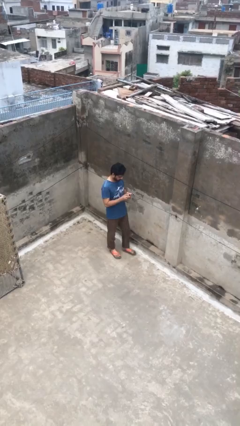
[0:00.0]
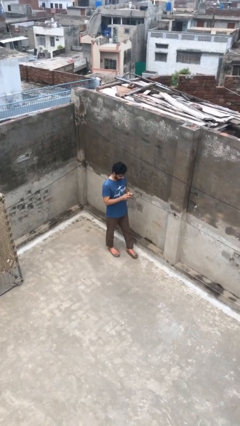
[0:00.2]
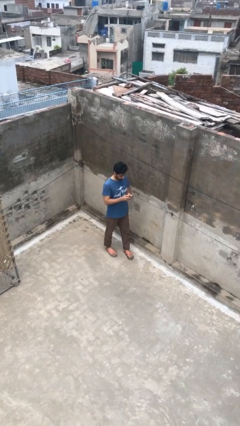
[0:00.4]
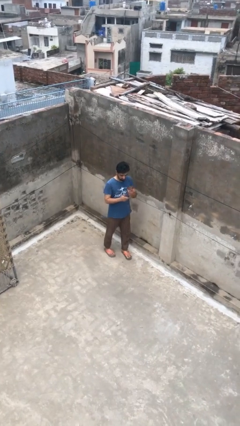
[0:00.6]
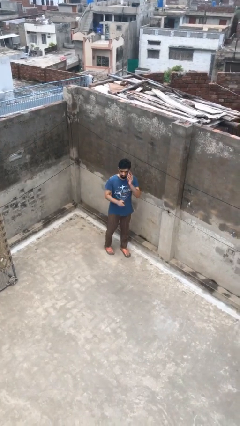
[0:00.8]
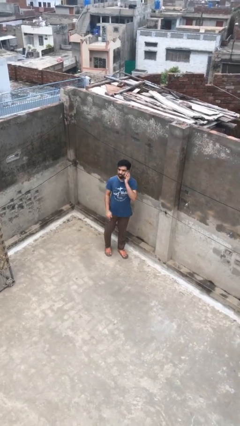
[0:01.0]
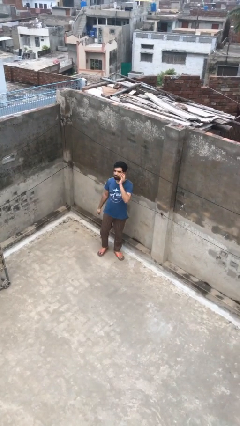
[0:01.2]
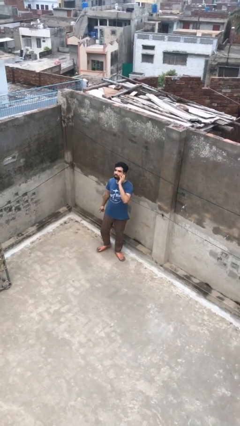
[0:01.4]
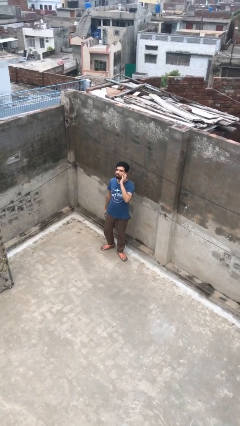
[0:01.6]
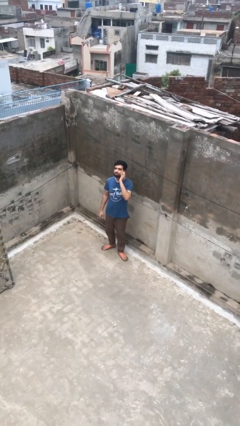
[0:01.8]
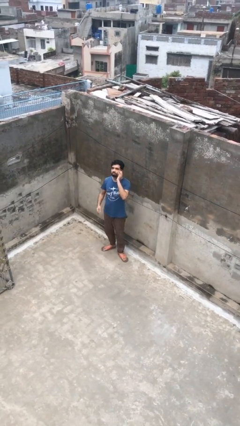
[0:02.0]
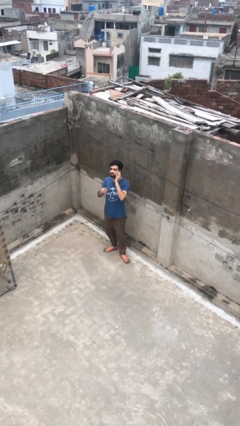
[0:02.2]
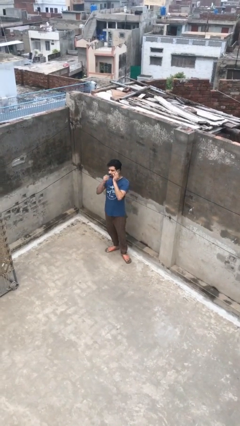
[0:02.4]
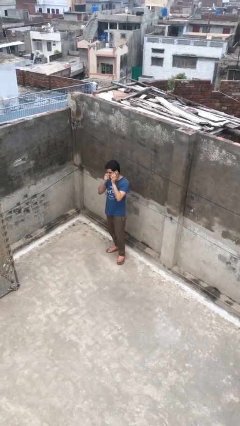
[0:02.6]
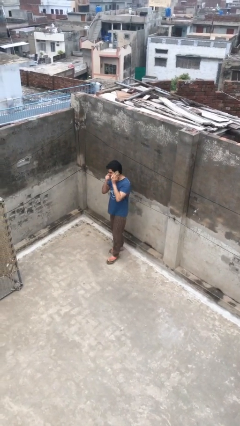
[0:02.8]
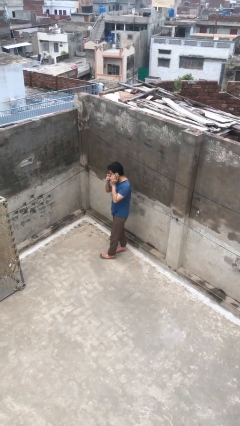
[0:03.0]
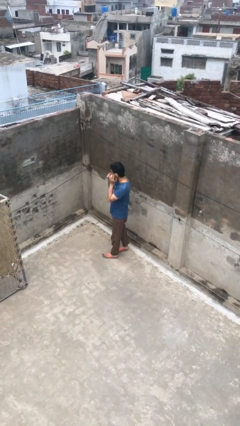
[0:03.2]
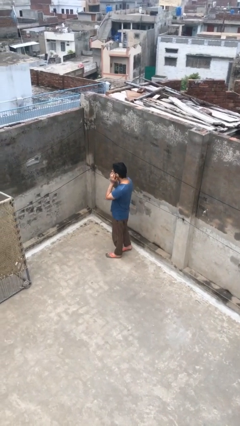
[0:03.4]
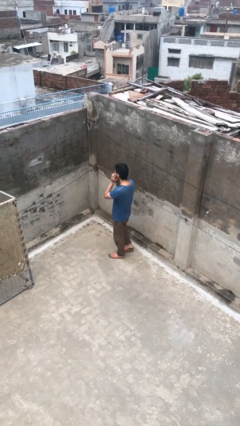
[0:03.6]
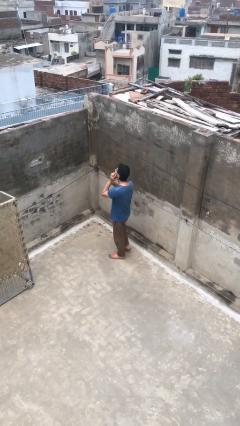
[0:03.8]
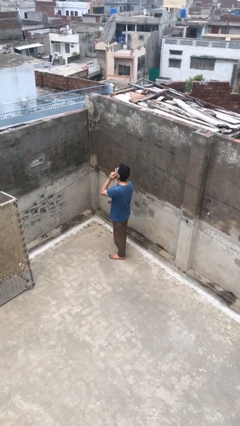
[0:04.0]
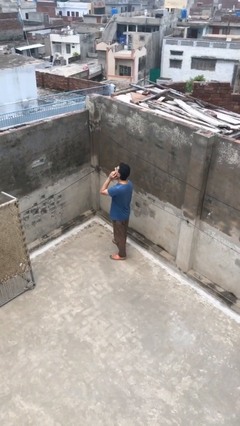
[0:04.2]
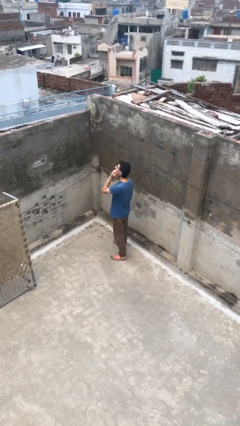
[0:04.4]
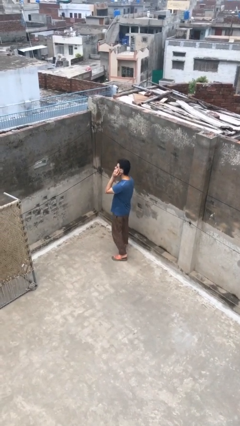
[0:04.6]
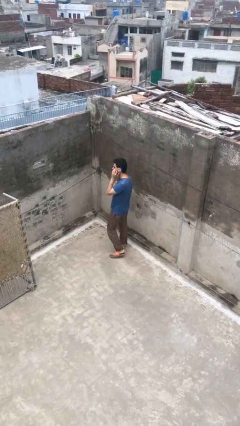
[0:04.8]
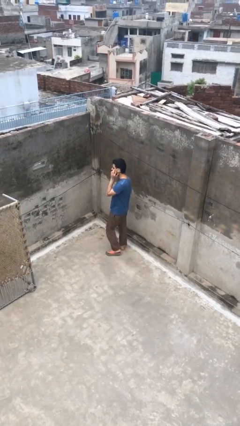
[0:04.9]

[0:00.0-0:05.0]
person talks on phone

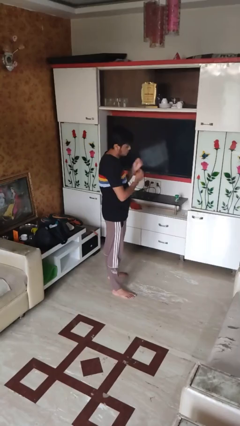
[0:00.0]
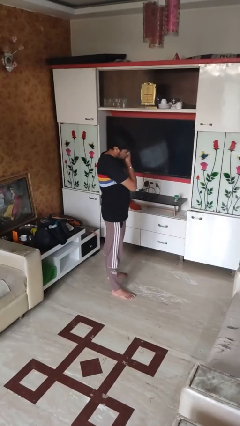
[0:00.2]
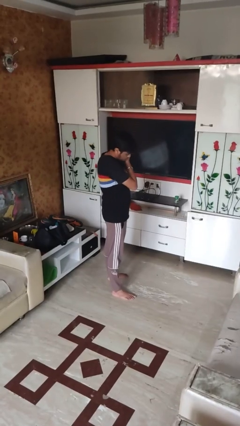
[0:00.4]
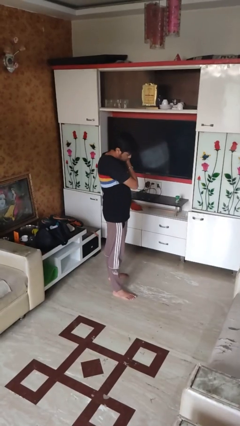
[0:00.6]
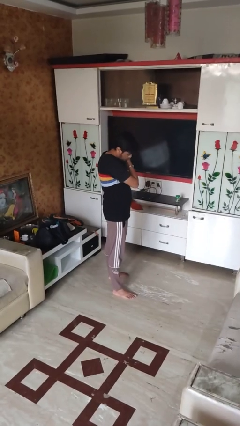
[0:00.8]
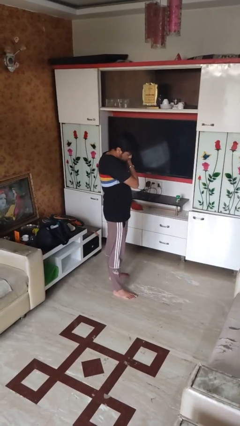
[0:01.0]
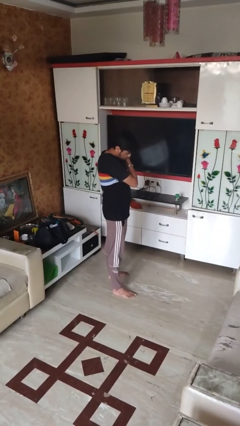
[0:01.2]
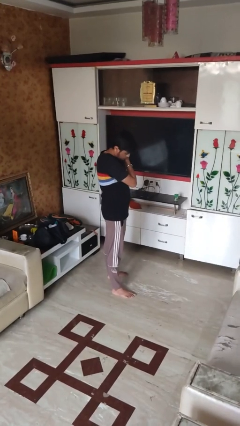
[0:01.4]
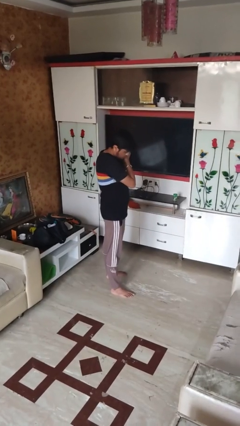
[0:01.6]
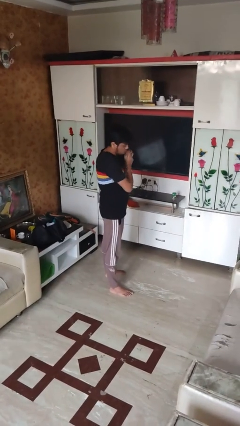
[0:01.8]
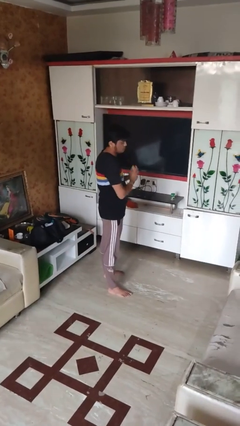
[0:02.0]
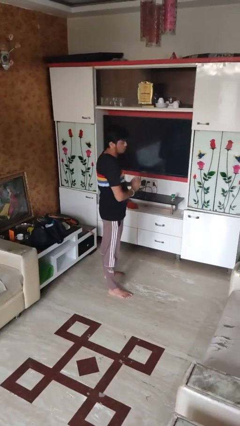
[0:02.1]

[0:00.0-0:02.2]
person takes off earrings

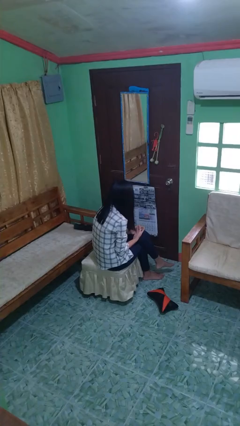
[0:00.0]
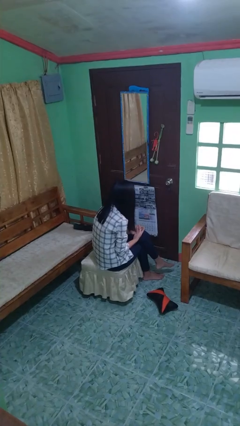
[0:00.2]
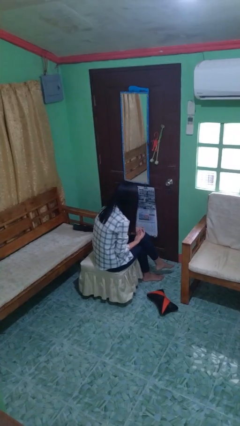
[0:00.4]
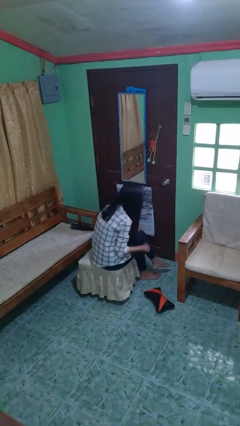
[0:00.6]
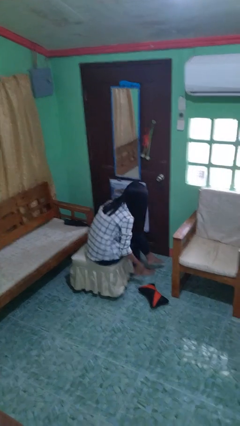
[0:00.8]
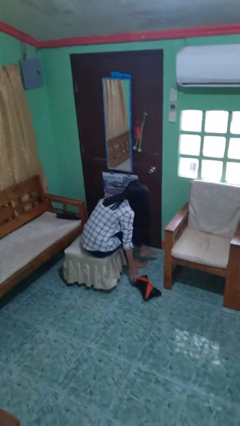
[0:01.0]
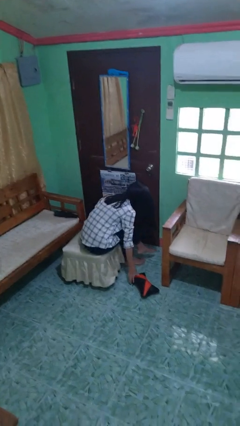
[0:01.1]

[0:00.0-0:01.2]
person picks up object from floor

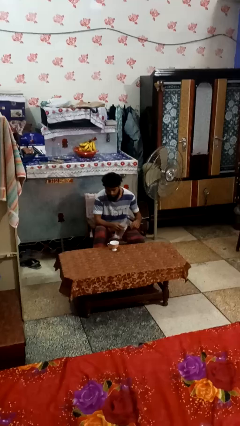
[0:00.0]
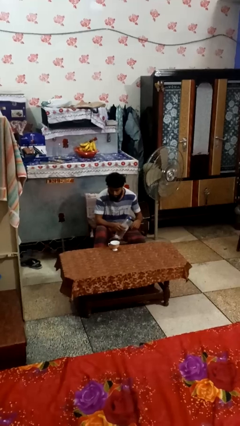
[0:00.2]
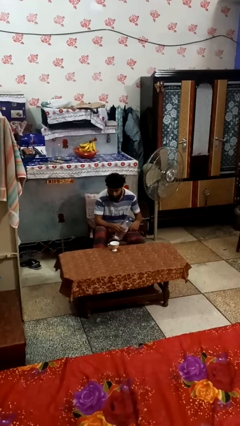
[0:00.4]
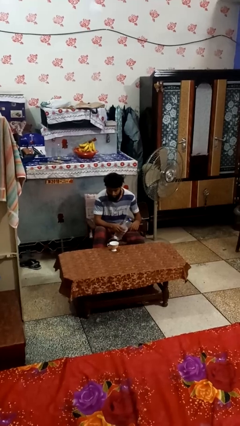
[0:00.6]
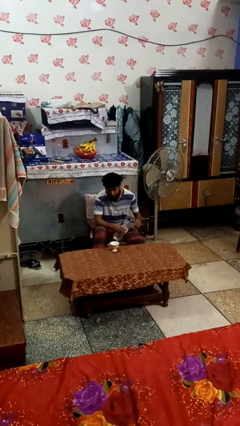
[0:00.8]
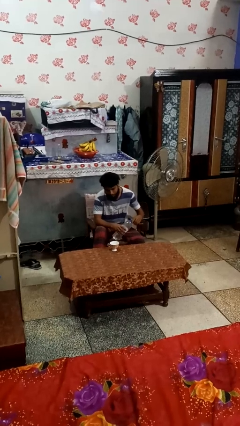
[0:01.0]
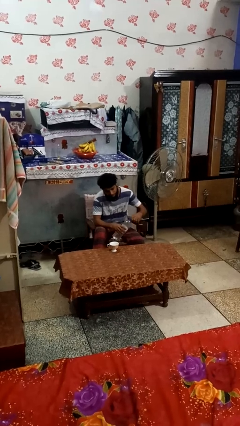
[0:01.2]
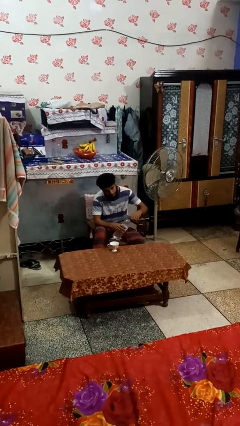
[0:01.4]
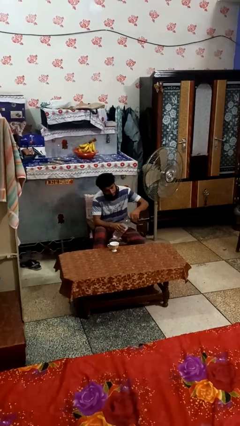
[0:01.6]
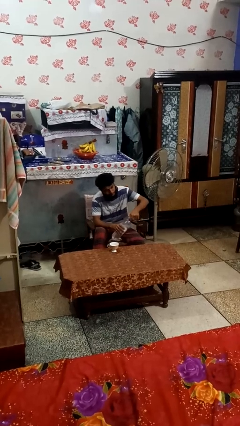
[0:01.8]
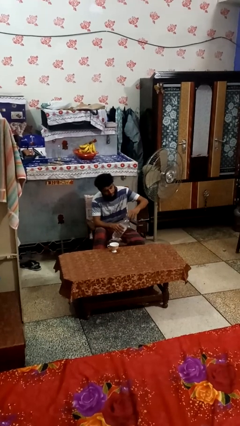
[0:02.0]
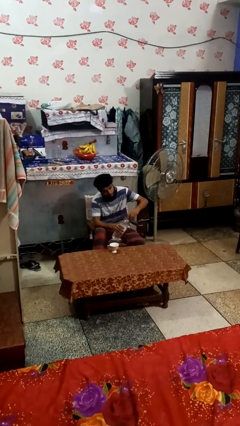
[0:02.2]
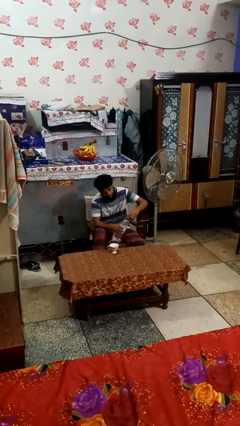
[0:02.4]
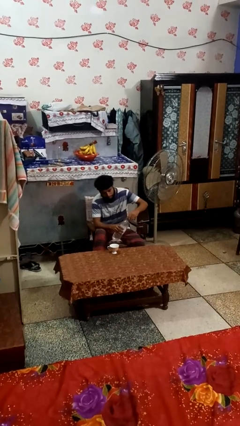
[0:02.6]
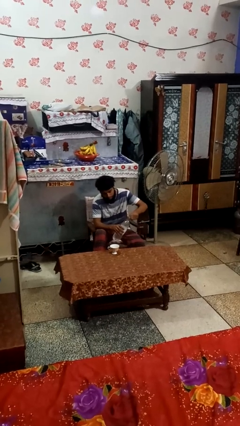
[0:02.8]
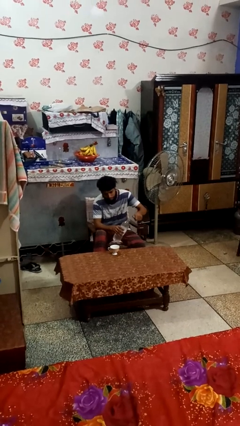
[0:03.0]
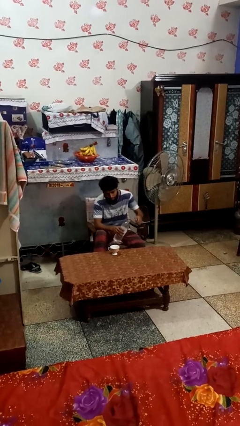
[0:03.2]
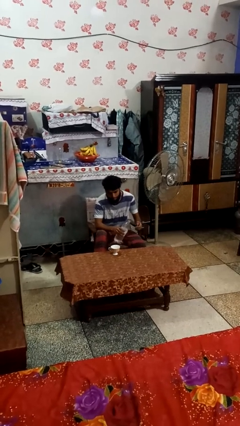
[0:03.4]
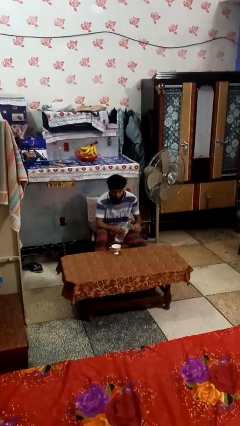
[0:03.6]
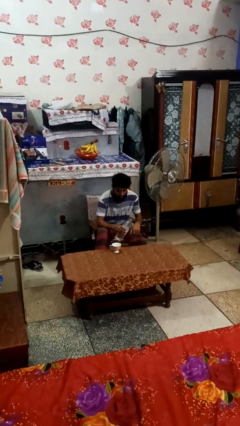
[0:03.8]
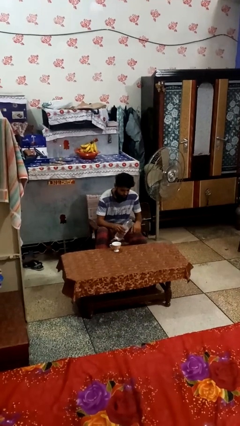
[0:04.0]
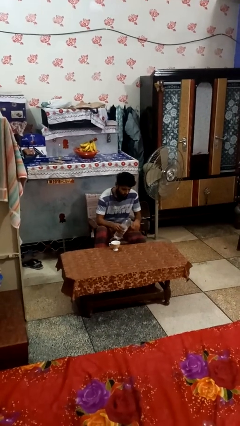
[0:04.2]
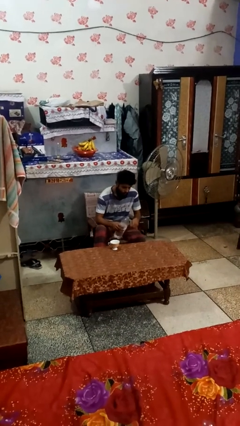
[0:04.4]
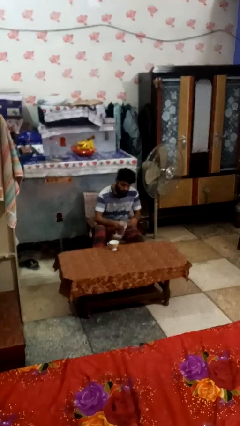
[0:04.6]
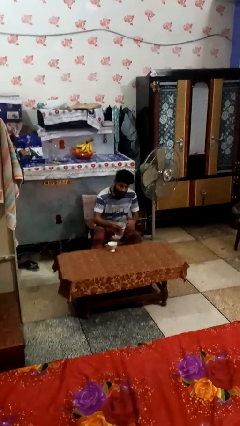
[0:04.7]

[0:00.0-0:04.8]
person unscrews lid from bottle

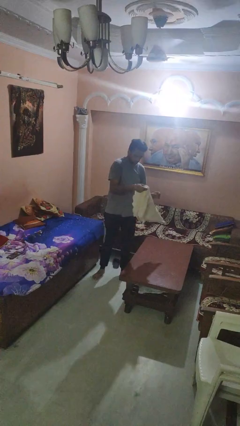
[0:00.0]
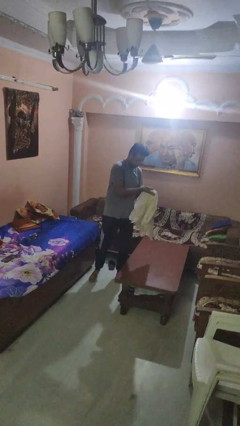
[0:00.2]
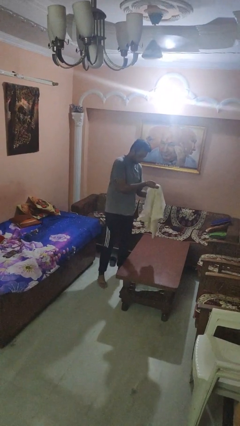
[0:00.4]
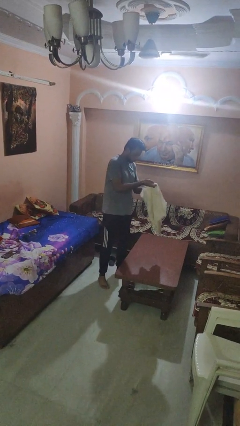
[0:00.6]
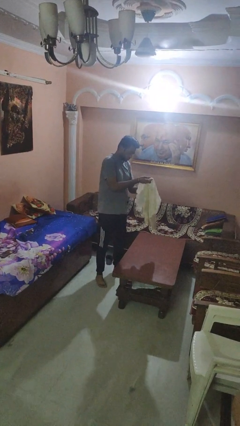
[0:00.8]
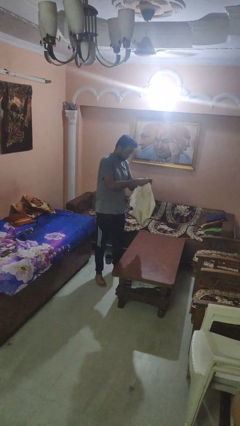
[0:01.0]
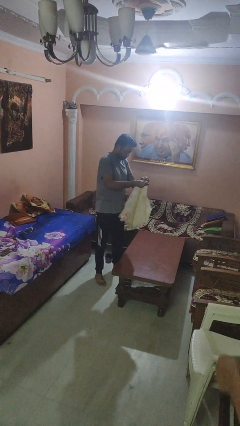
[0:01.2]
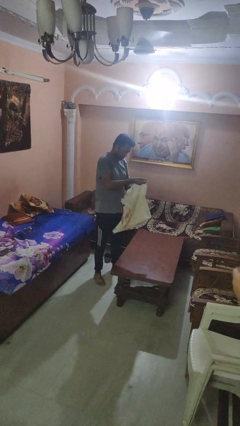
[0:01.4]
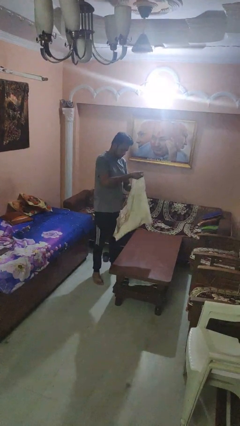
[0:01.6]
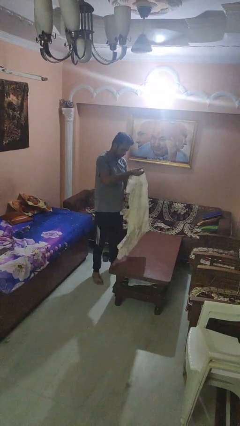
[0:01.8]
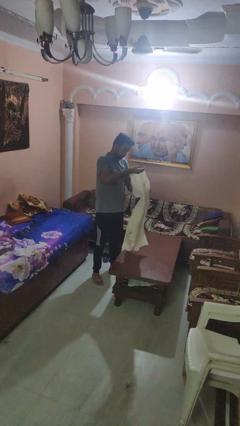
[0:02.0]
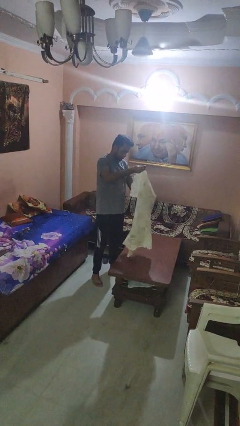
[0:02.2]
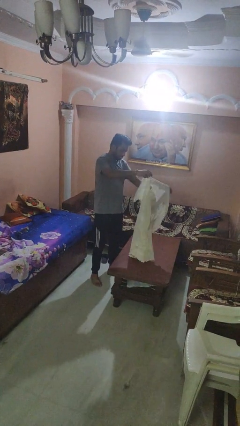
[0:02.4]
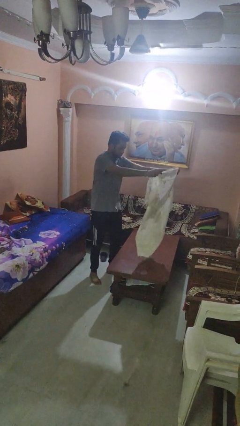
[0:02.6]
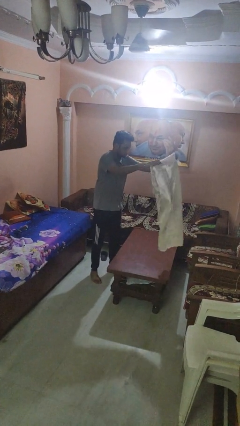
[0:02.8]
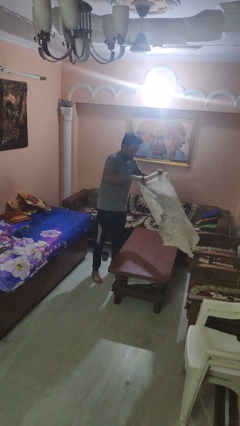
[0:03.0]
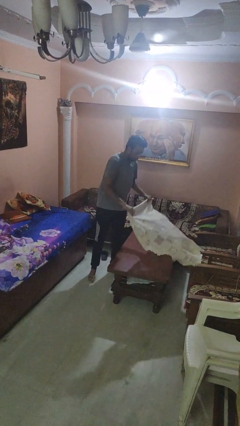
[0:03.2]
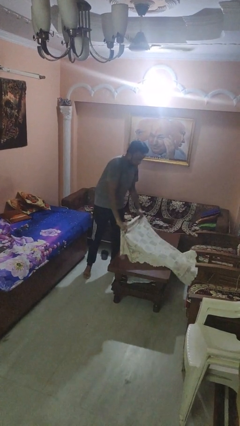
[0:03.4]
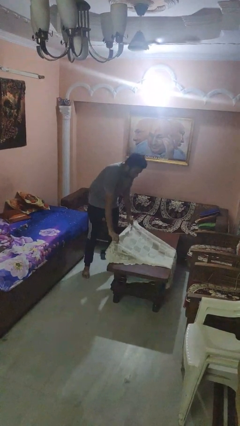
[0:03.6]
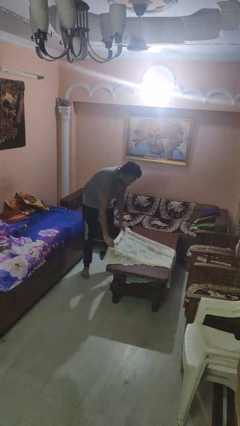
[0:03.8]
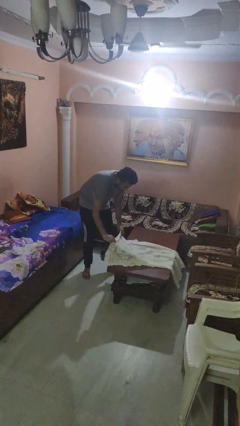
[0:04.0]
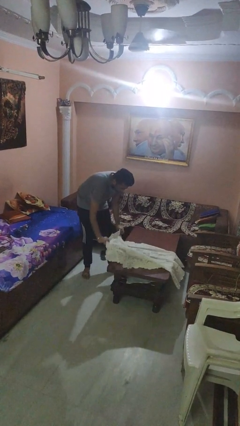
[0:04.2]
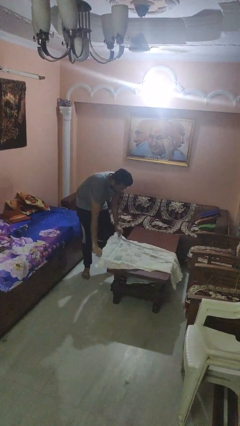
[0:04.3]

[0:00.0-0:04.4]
person spreads tablecloth
